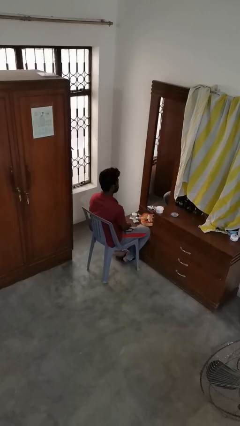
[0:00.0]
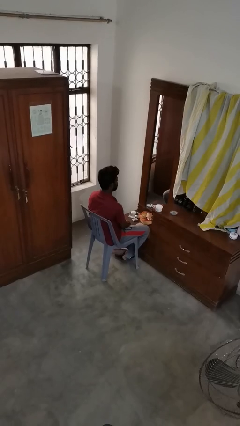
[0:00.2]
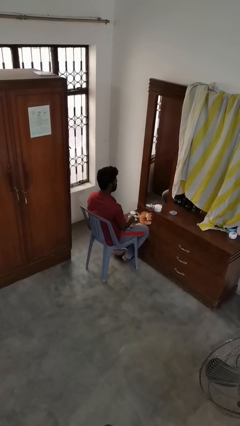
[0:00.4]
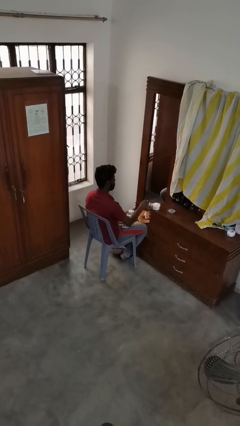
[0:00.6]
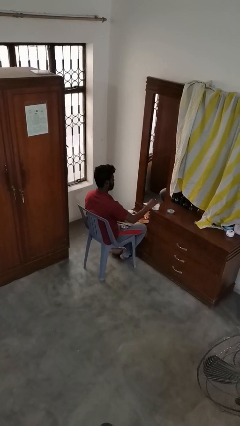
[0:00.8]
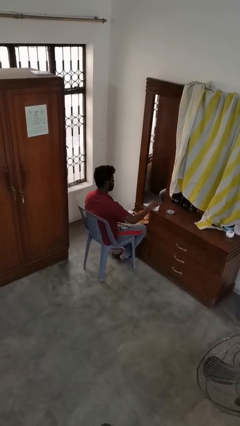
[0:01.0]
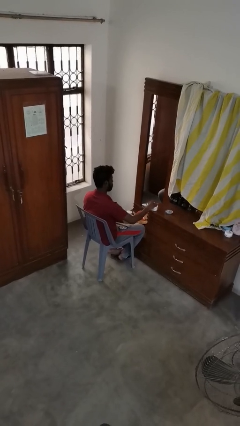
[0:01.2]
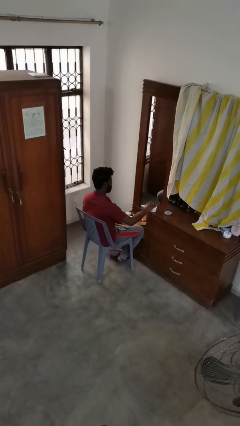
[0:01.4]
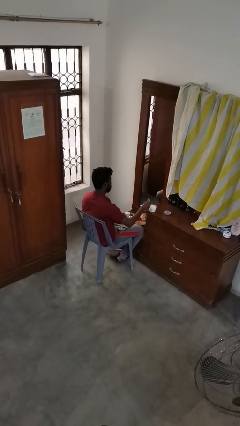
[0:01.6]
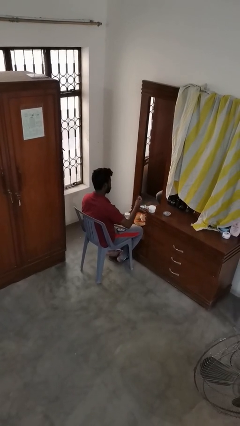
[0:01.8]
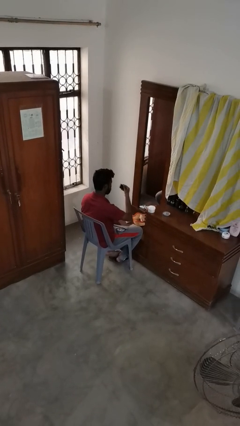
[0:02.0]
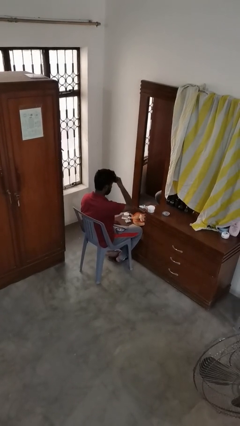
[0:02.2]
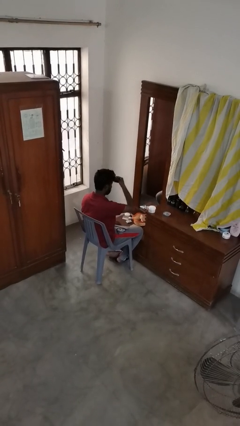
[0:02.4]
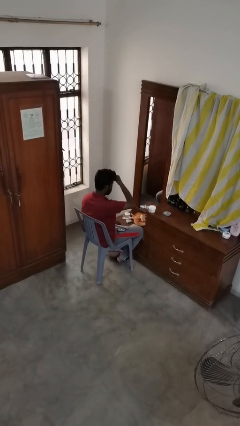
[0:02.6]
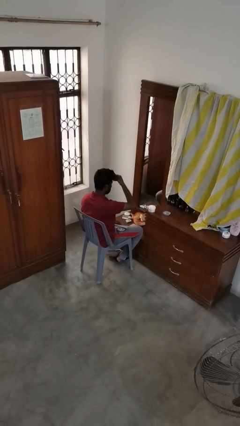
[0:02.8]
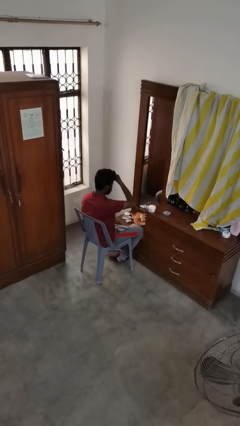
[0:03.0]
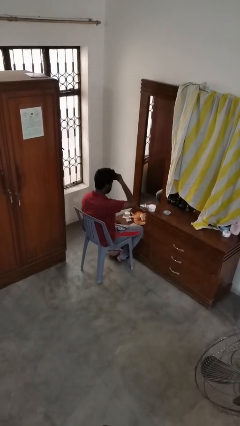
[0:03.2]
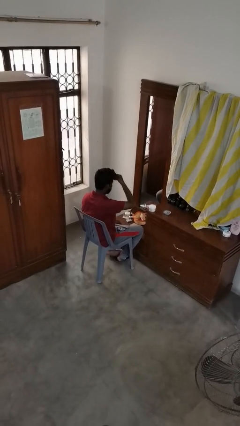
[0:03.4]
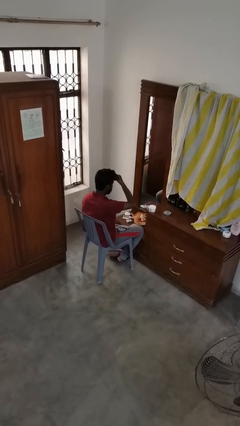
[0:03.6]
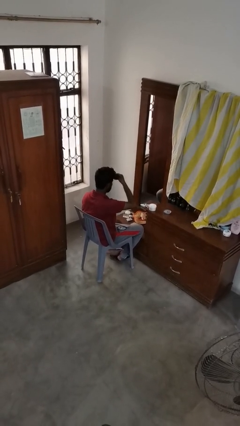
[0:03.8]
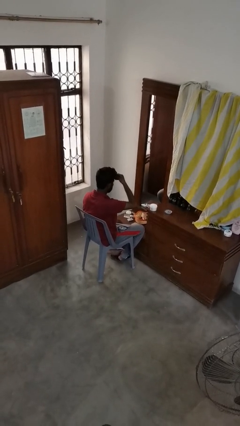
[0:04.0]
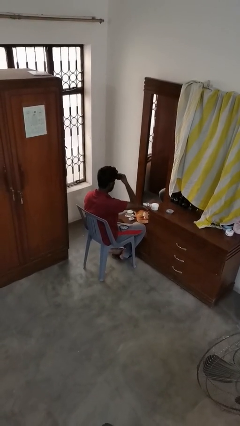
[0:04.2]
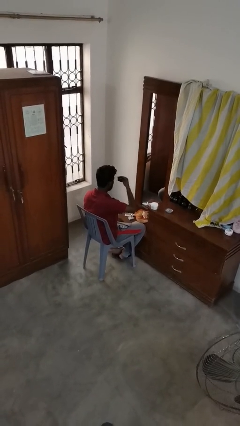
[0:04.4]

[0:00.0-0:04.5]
person applies foundation makeup

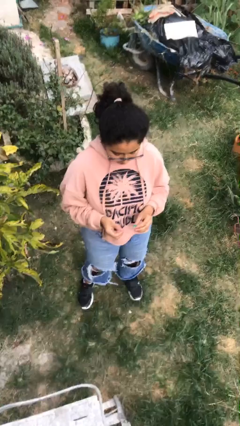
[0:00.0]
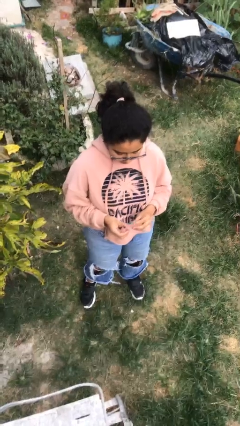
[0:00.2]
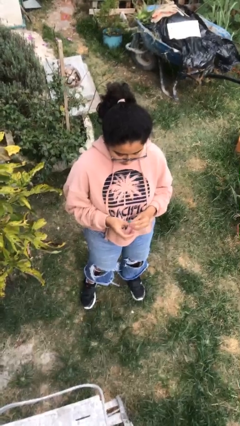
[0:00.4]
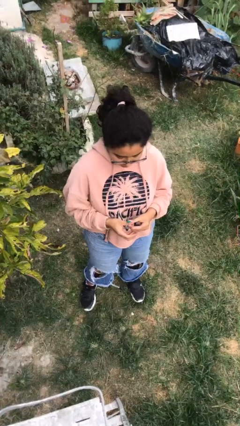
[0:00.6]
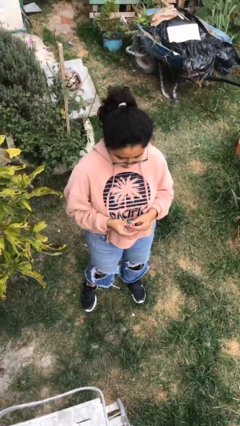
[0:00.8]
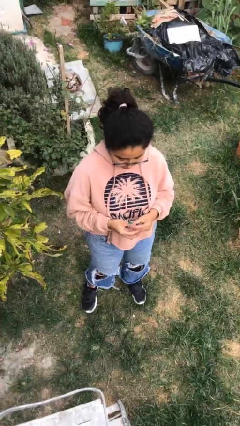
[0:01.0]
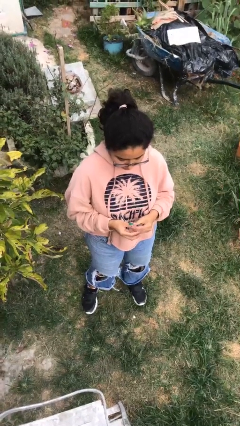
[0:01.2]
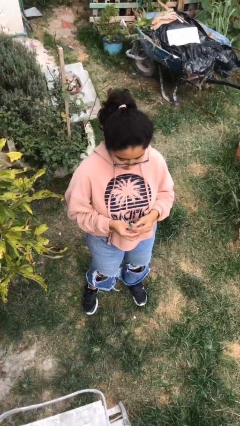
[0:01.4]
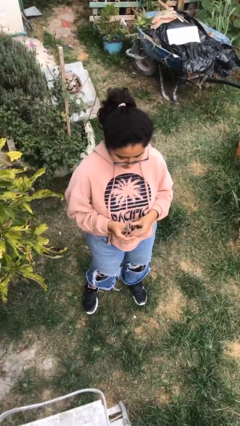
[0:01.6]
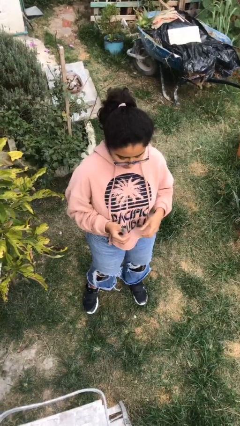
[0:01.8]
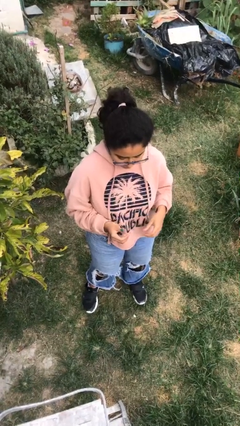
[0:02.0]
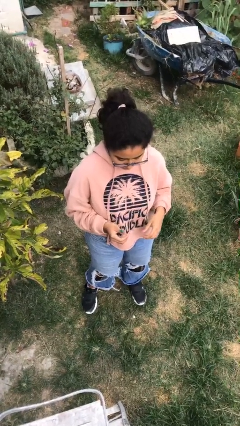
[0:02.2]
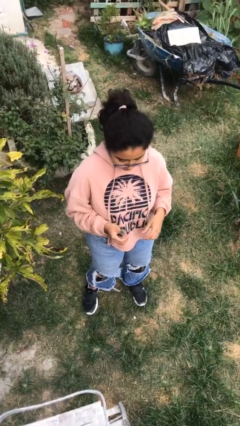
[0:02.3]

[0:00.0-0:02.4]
person puts on ring

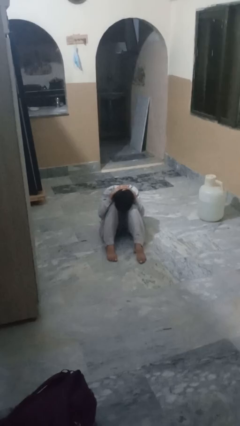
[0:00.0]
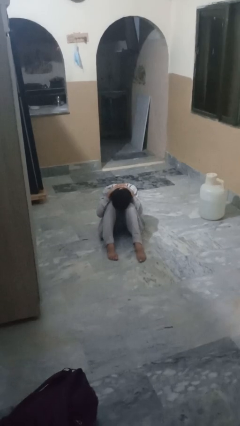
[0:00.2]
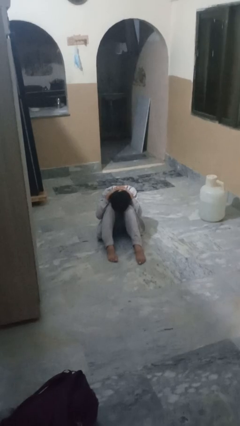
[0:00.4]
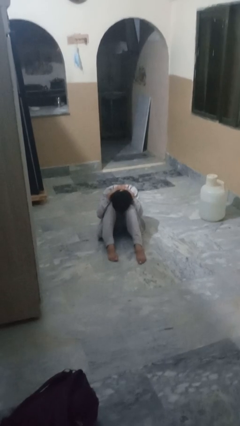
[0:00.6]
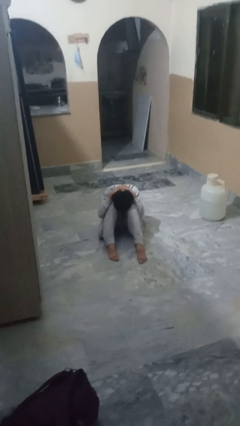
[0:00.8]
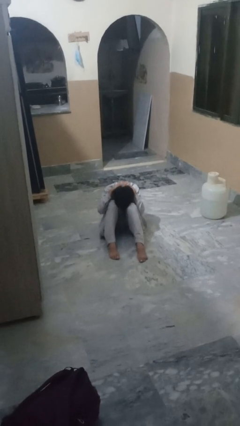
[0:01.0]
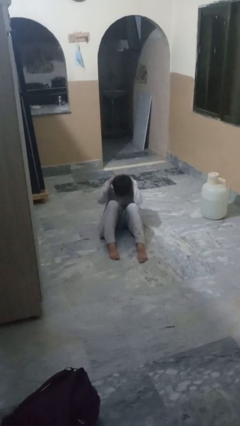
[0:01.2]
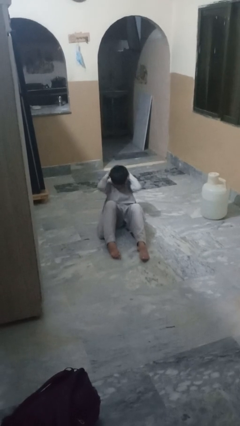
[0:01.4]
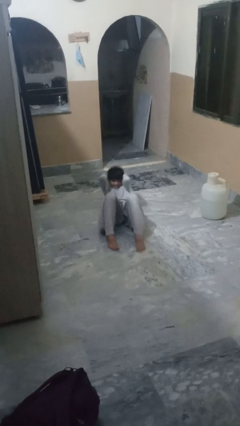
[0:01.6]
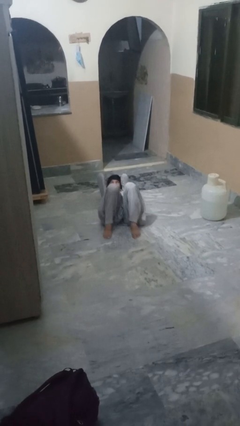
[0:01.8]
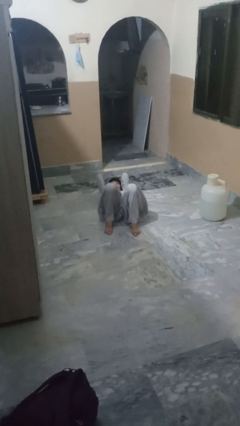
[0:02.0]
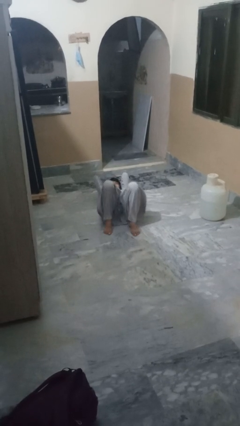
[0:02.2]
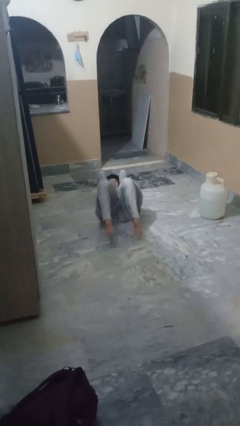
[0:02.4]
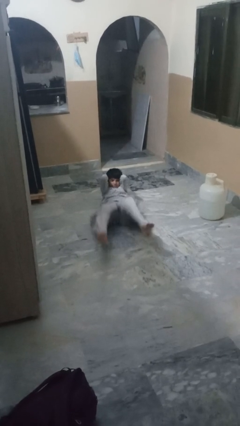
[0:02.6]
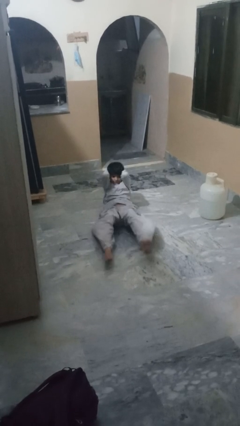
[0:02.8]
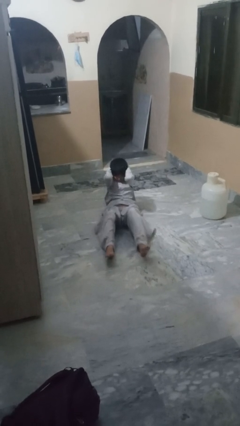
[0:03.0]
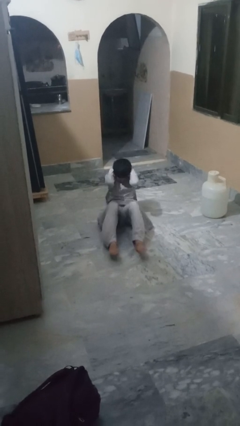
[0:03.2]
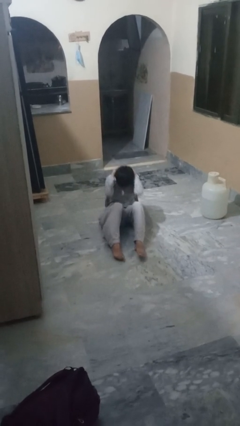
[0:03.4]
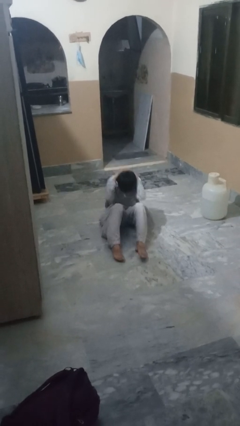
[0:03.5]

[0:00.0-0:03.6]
person exercises with situp

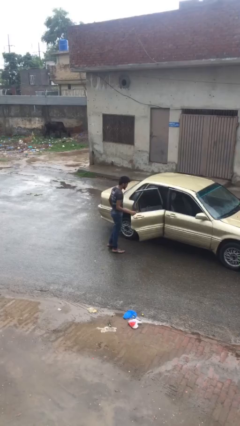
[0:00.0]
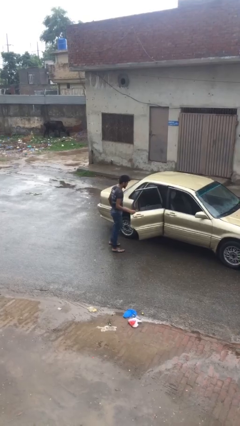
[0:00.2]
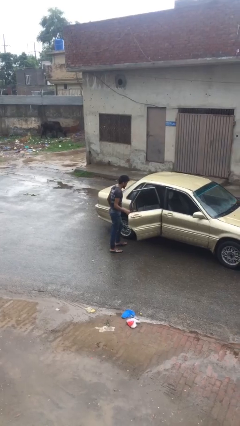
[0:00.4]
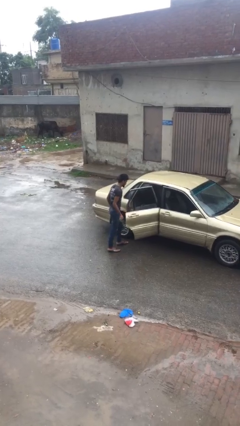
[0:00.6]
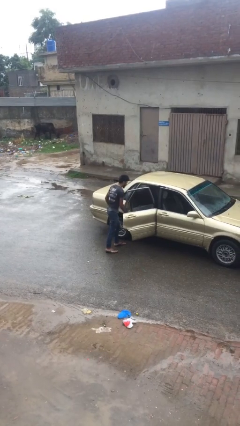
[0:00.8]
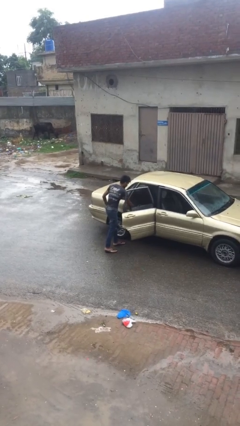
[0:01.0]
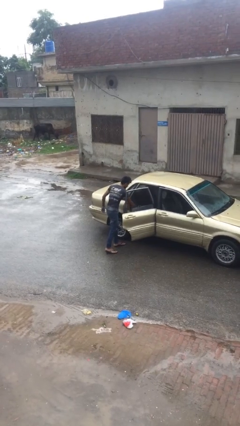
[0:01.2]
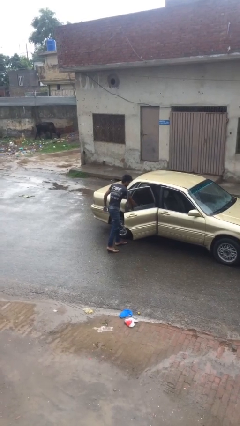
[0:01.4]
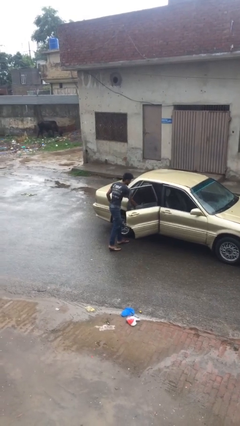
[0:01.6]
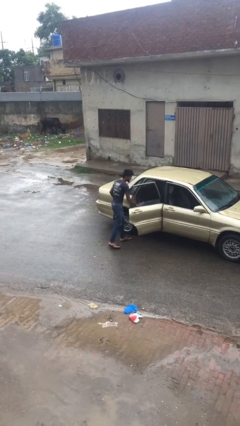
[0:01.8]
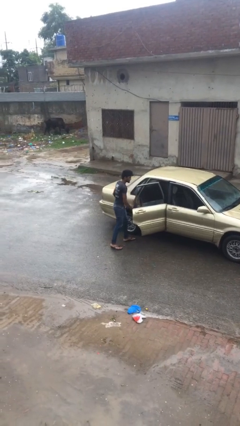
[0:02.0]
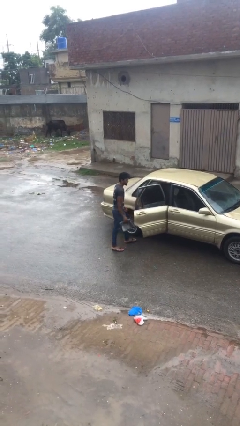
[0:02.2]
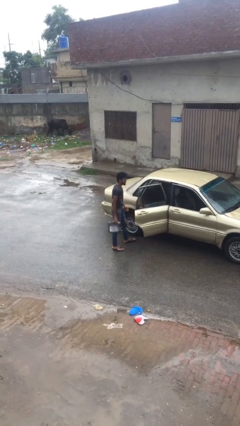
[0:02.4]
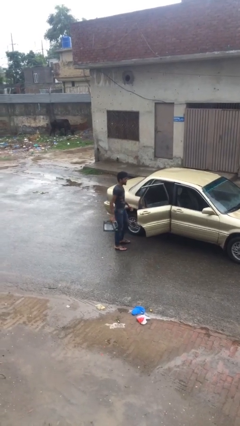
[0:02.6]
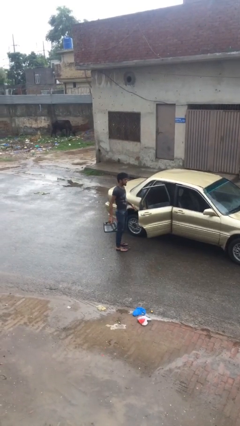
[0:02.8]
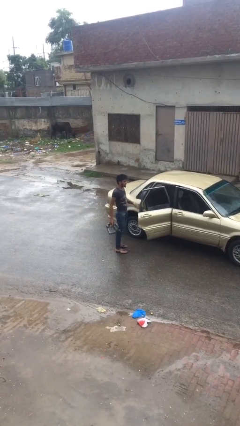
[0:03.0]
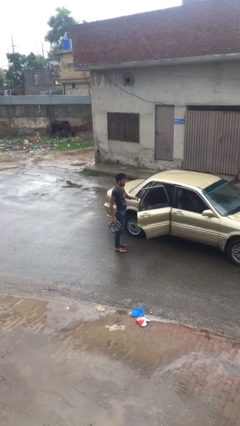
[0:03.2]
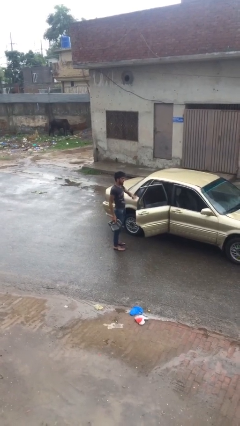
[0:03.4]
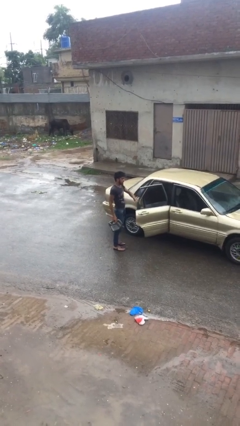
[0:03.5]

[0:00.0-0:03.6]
person unloads car

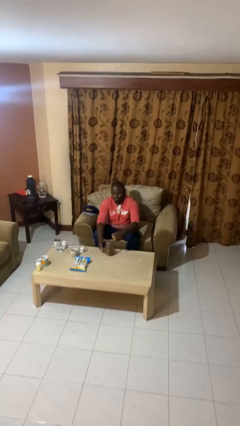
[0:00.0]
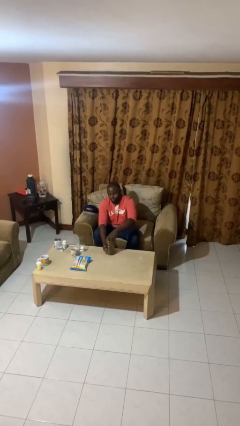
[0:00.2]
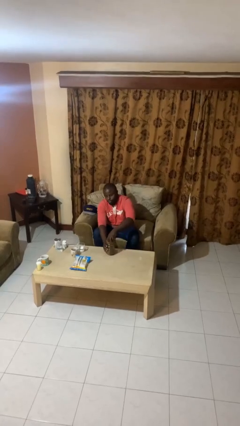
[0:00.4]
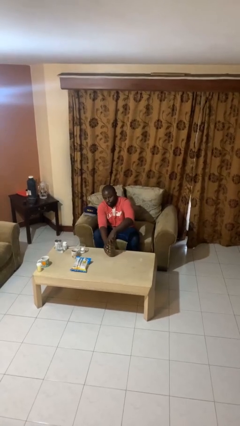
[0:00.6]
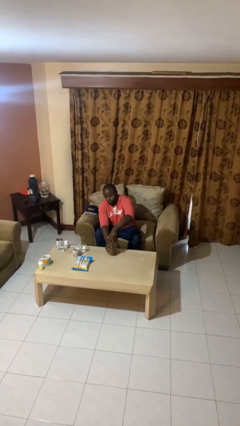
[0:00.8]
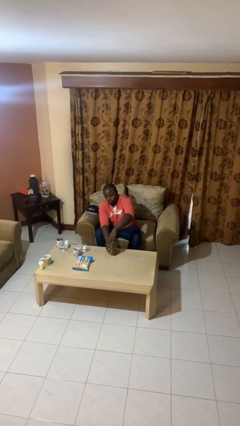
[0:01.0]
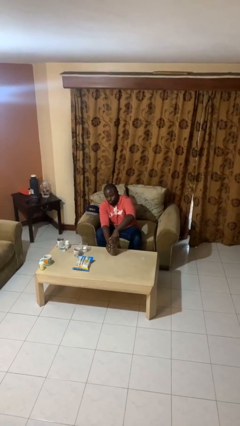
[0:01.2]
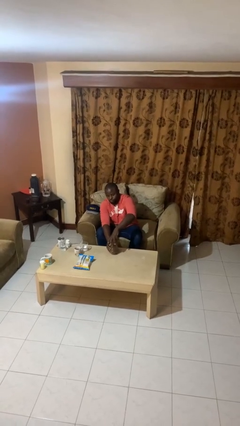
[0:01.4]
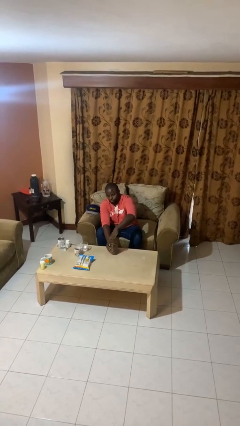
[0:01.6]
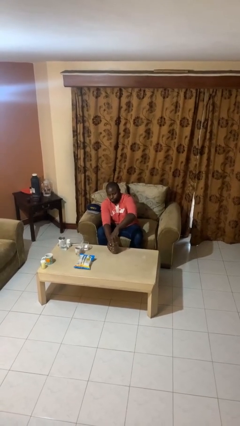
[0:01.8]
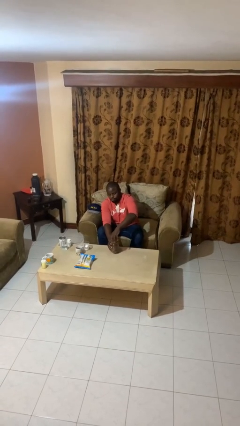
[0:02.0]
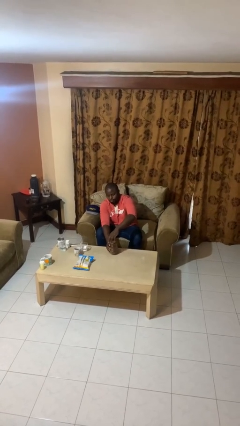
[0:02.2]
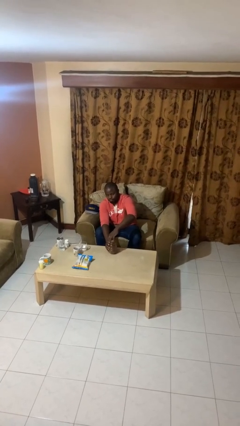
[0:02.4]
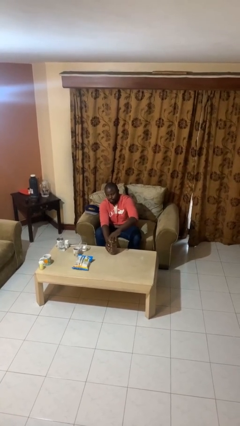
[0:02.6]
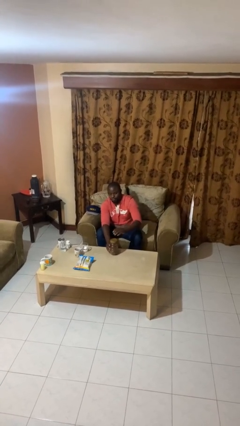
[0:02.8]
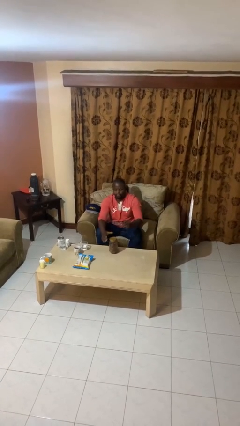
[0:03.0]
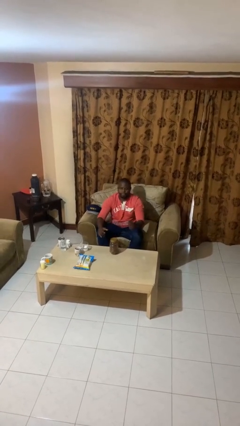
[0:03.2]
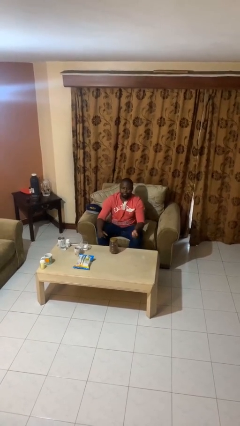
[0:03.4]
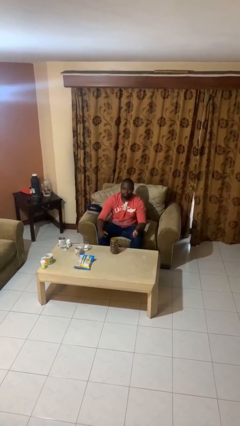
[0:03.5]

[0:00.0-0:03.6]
person closes jar

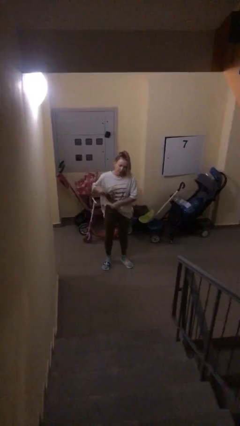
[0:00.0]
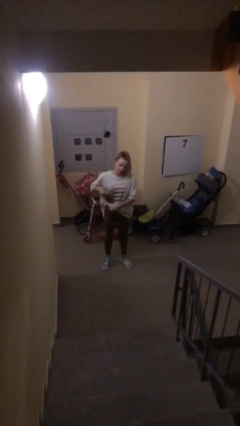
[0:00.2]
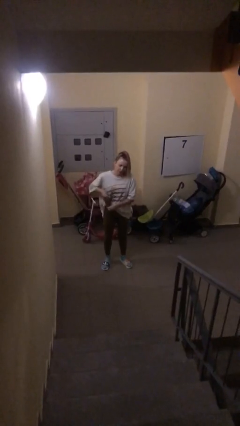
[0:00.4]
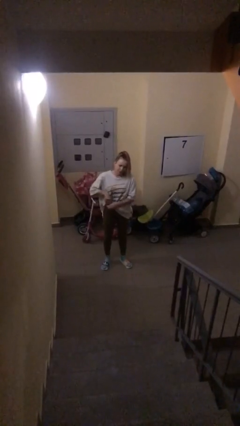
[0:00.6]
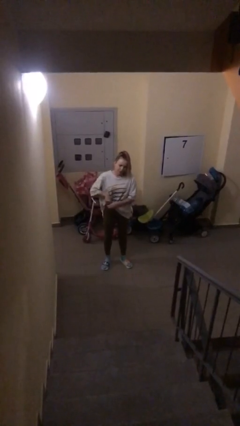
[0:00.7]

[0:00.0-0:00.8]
person puts phone into pocket
